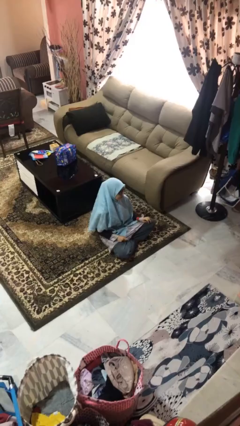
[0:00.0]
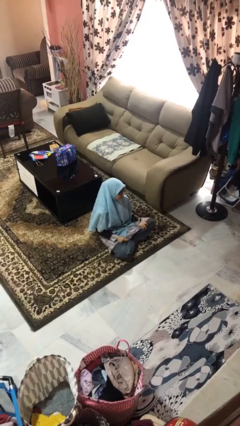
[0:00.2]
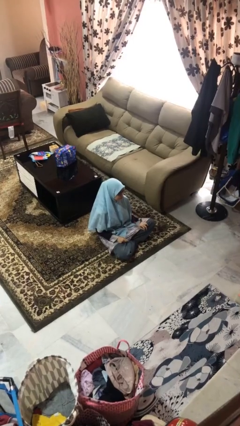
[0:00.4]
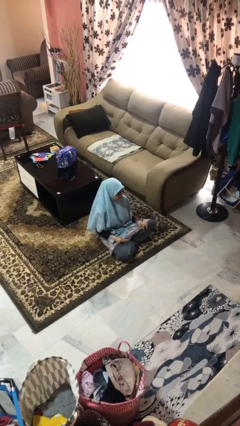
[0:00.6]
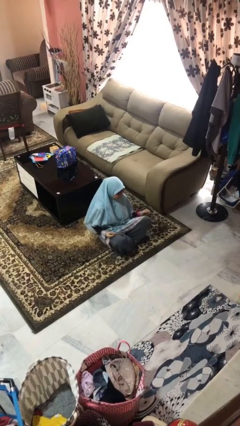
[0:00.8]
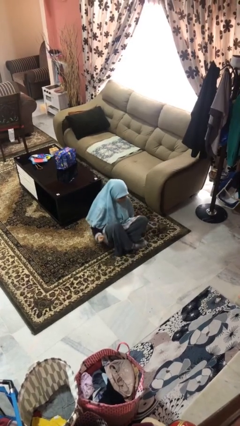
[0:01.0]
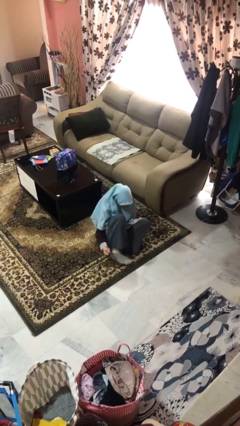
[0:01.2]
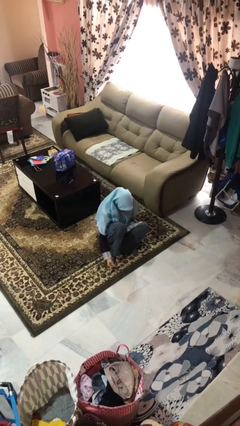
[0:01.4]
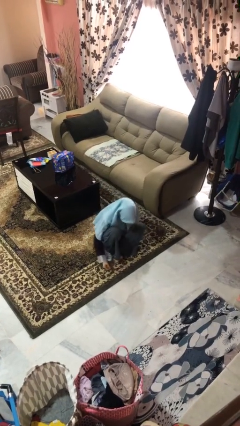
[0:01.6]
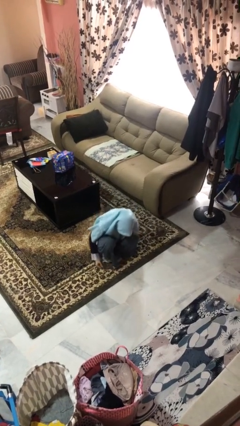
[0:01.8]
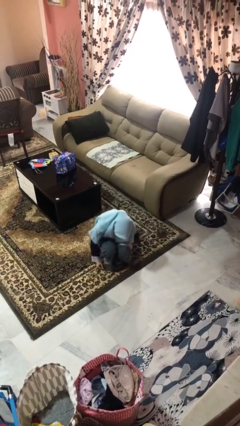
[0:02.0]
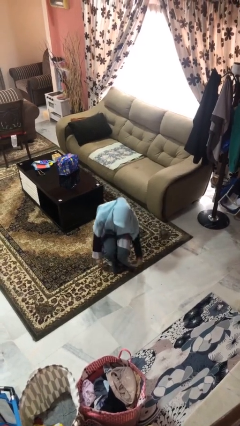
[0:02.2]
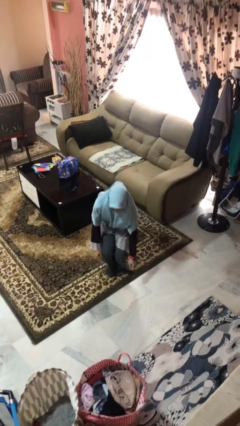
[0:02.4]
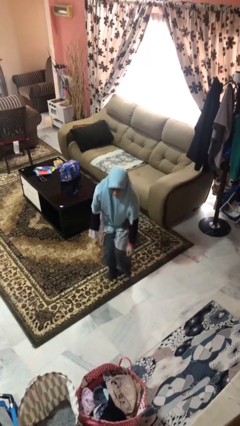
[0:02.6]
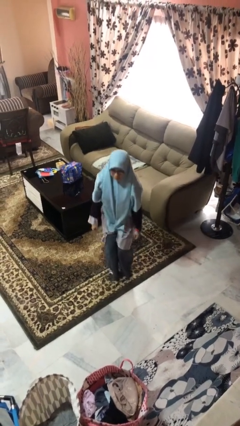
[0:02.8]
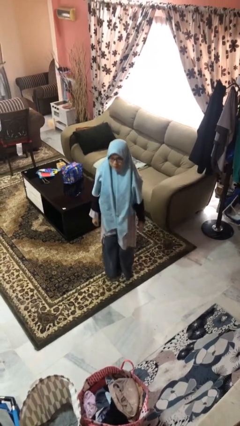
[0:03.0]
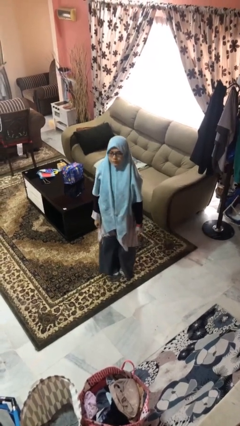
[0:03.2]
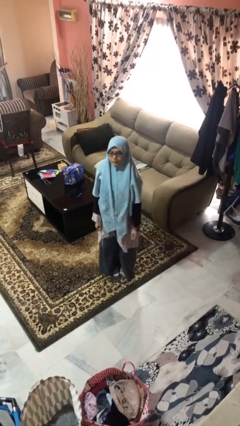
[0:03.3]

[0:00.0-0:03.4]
person stands up from floor

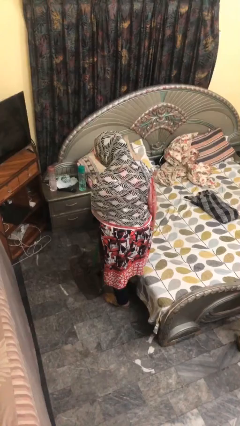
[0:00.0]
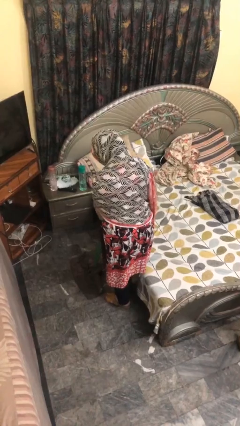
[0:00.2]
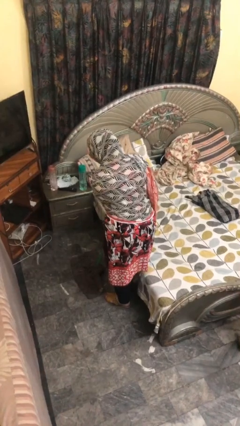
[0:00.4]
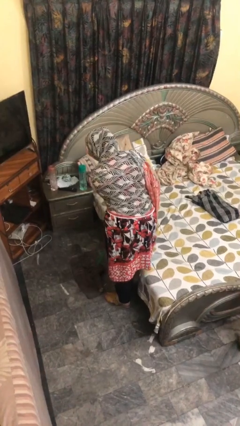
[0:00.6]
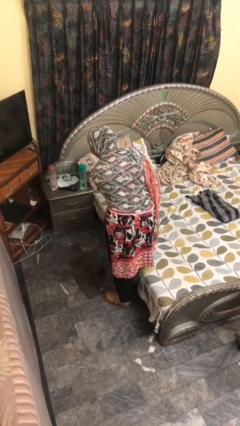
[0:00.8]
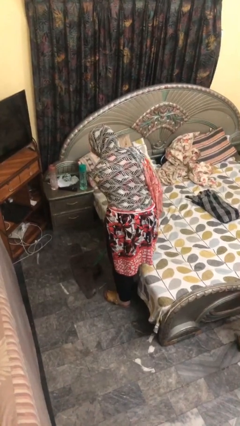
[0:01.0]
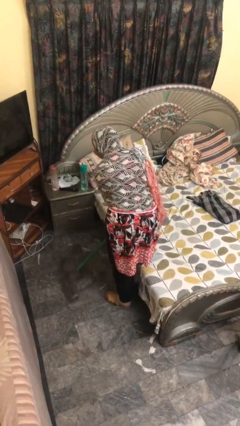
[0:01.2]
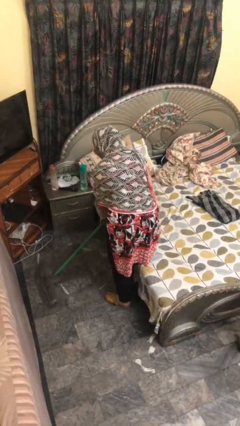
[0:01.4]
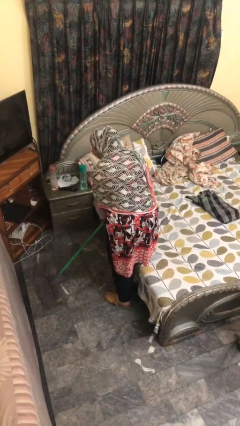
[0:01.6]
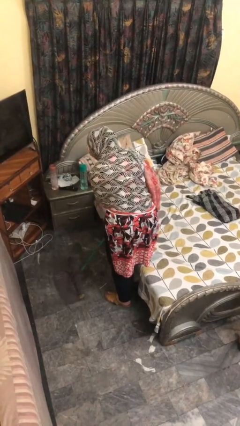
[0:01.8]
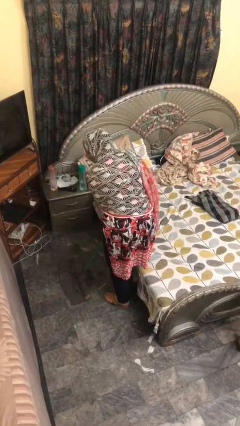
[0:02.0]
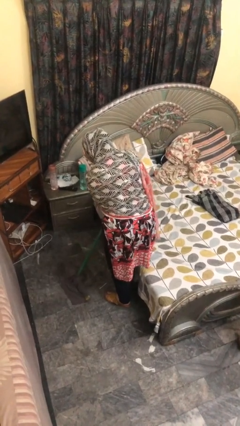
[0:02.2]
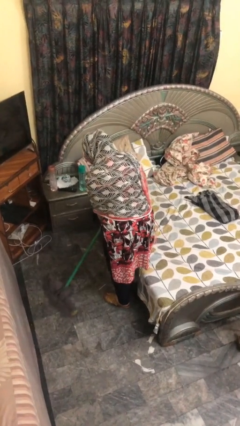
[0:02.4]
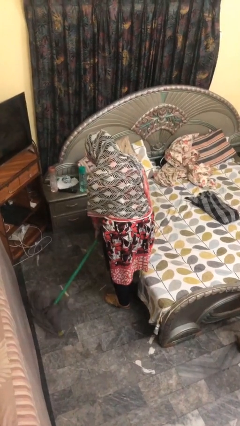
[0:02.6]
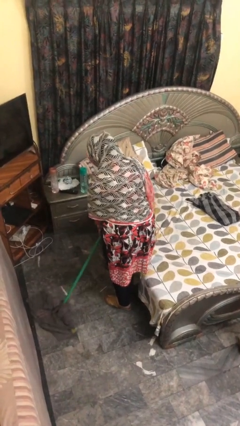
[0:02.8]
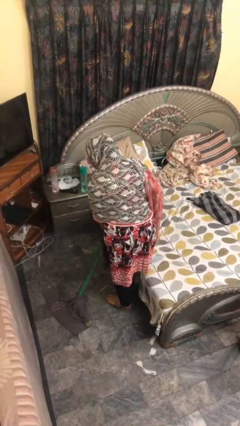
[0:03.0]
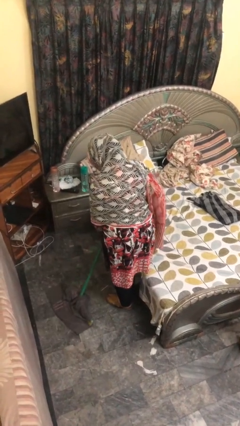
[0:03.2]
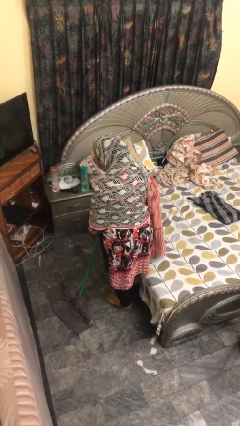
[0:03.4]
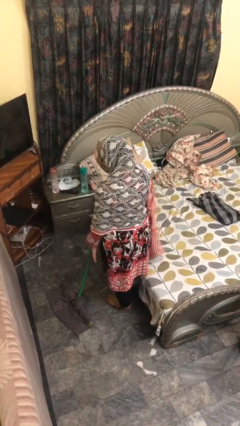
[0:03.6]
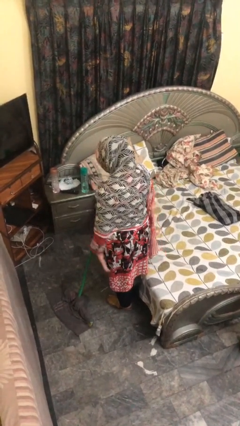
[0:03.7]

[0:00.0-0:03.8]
person mops

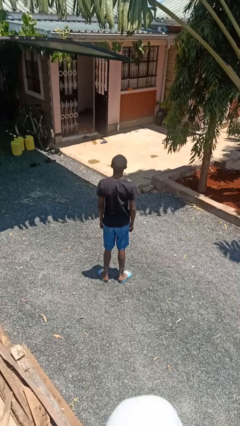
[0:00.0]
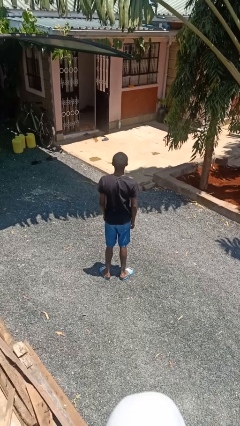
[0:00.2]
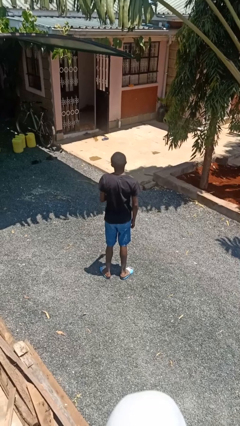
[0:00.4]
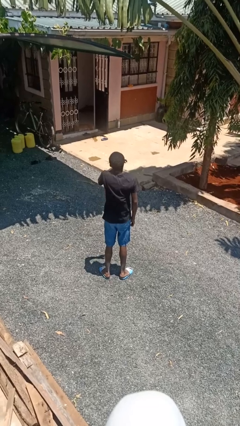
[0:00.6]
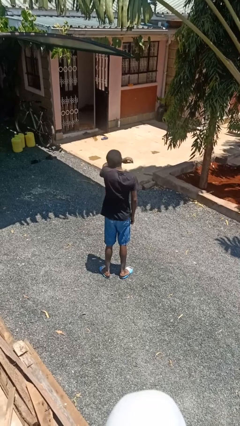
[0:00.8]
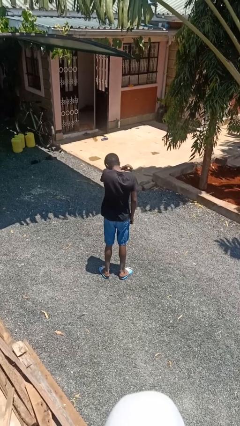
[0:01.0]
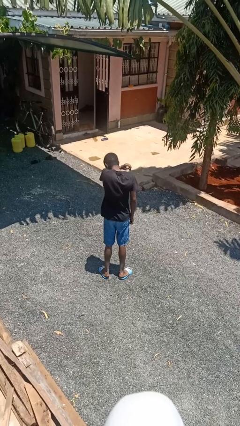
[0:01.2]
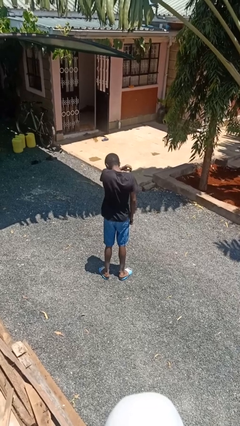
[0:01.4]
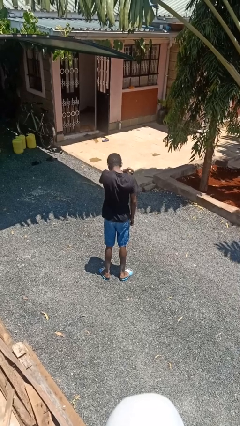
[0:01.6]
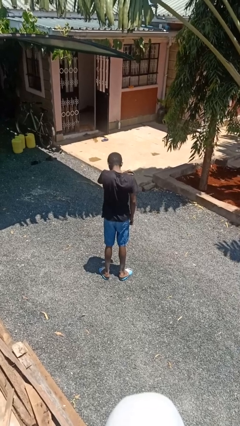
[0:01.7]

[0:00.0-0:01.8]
person sneezes into arm

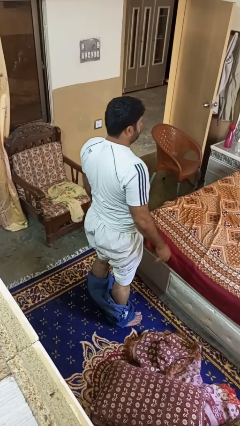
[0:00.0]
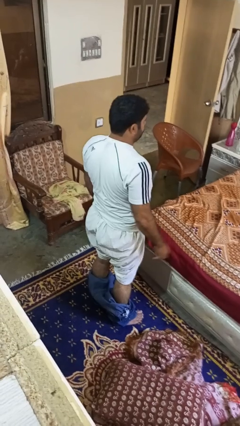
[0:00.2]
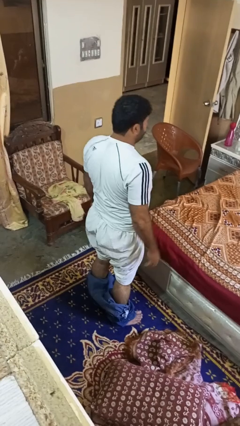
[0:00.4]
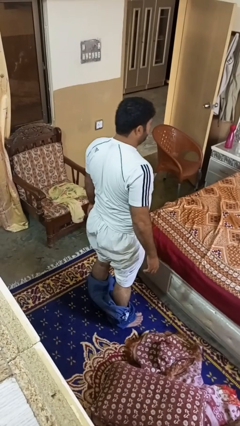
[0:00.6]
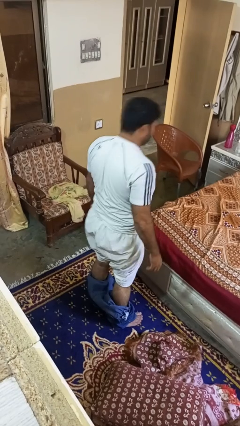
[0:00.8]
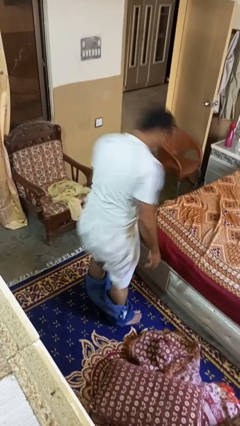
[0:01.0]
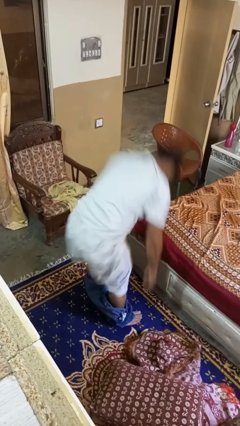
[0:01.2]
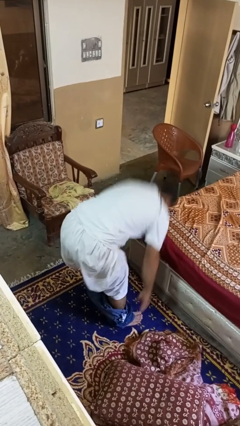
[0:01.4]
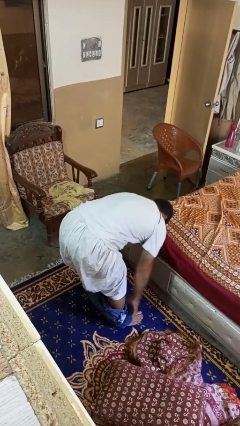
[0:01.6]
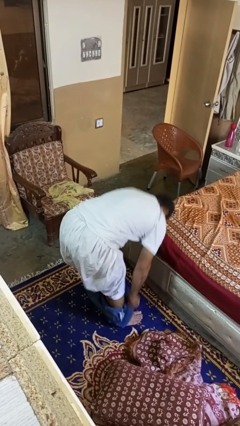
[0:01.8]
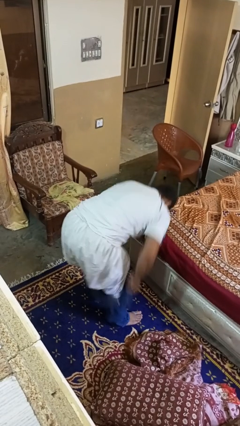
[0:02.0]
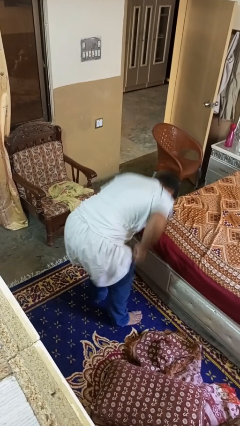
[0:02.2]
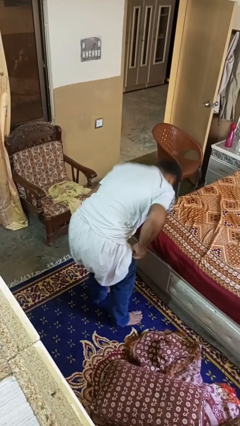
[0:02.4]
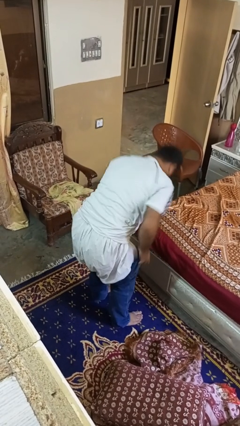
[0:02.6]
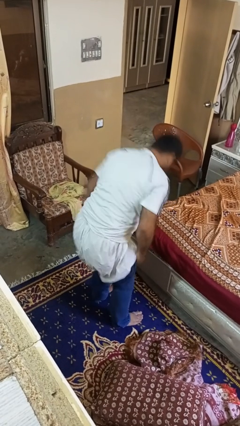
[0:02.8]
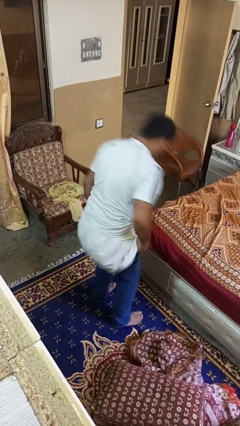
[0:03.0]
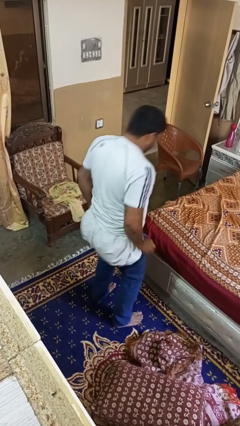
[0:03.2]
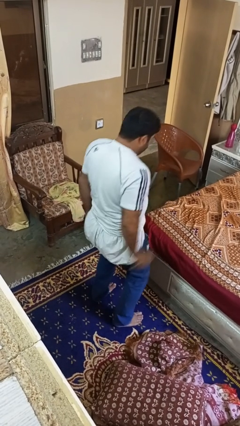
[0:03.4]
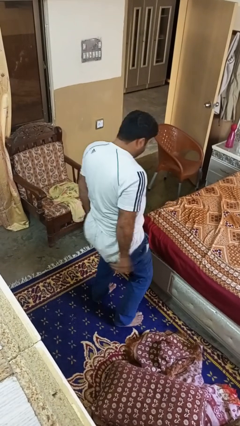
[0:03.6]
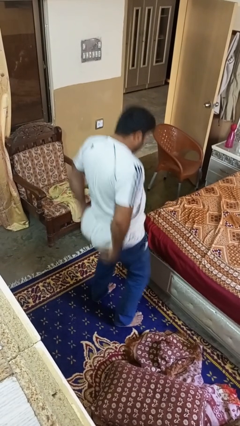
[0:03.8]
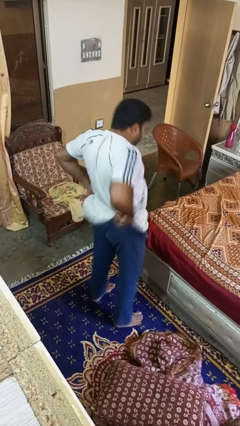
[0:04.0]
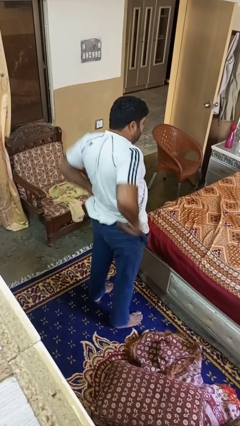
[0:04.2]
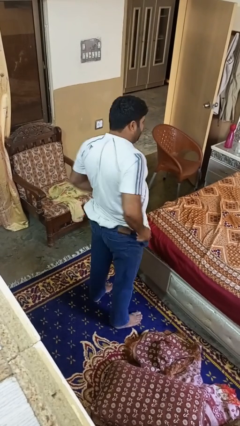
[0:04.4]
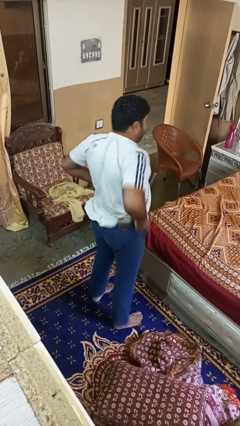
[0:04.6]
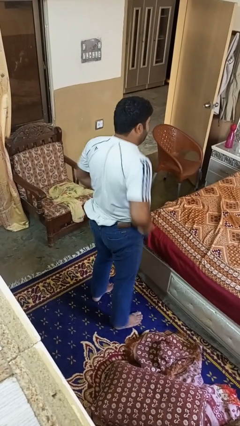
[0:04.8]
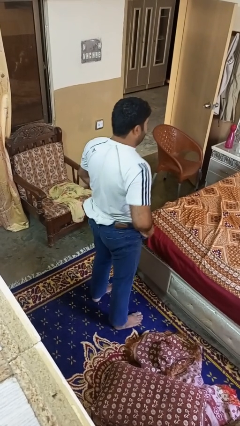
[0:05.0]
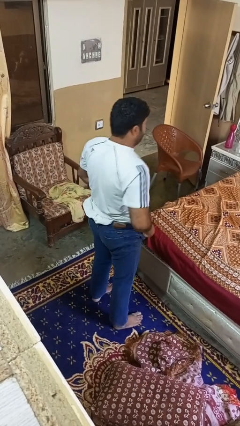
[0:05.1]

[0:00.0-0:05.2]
person puts on pants

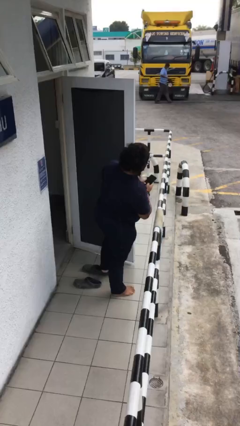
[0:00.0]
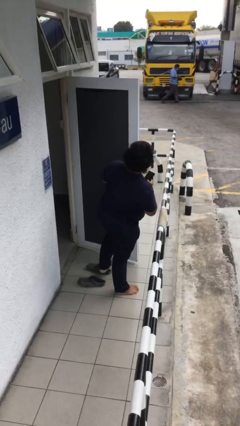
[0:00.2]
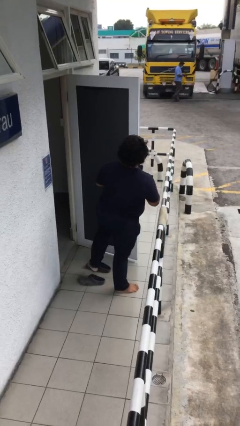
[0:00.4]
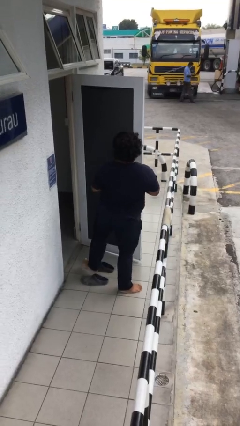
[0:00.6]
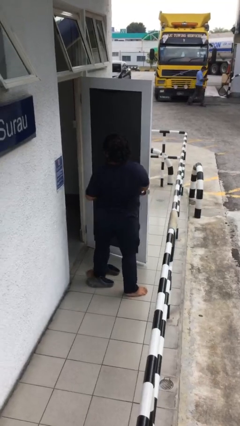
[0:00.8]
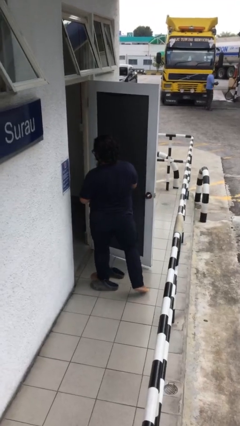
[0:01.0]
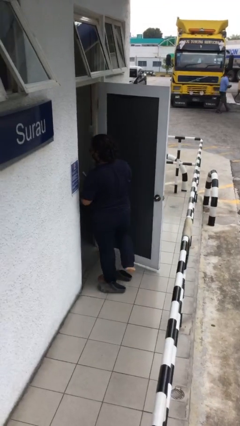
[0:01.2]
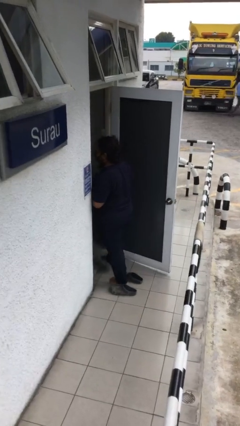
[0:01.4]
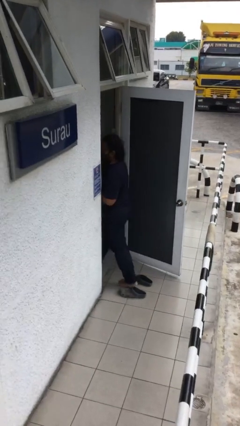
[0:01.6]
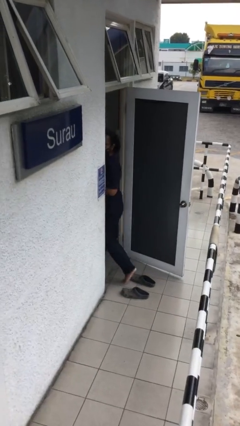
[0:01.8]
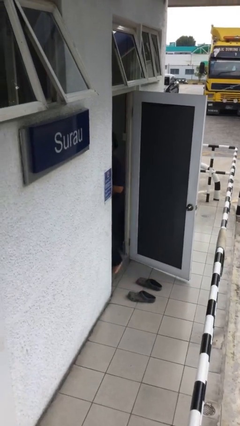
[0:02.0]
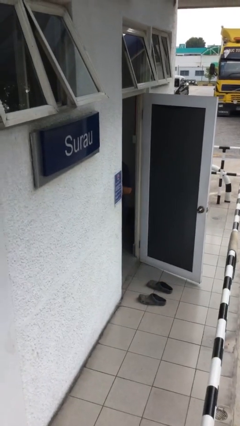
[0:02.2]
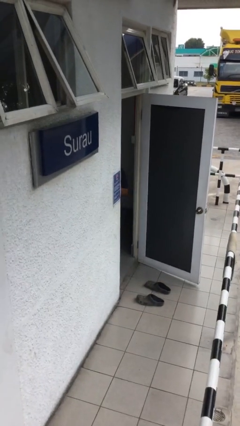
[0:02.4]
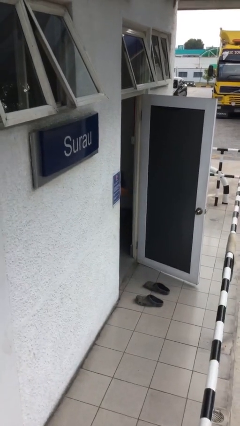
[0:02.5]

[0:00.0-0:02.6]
person exits scene through structure

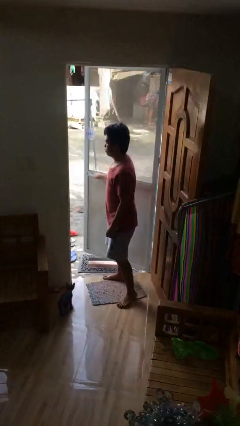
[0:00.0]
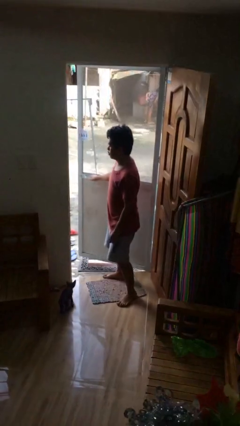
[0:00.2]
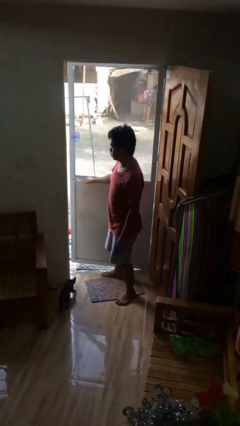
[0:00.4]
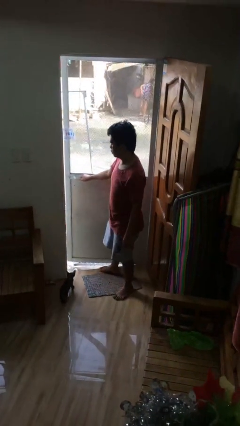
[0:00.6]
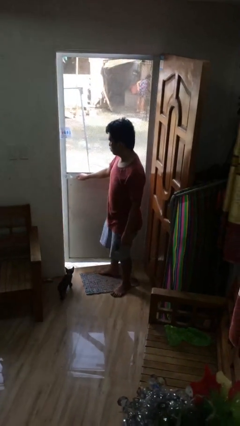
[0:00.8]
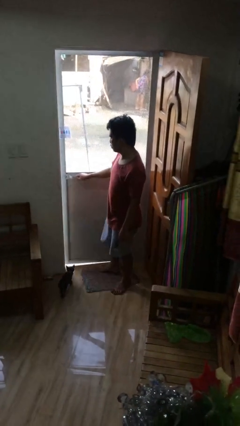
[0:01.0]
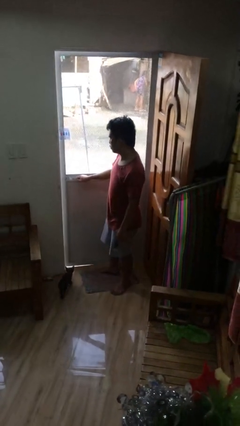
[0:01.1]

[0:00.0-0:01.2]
person closes facility door
